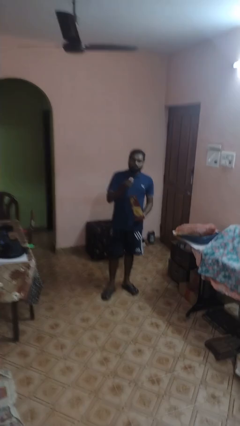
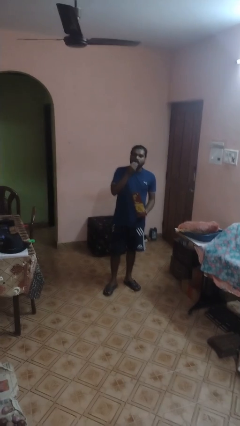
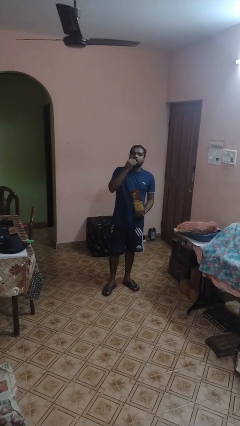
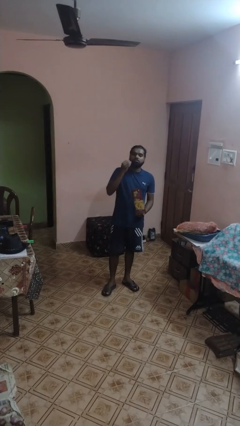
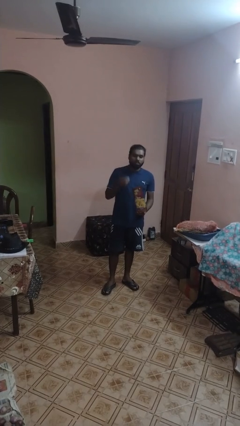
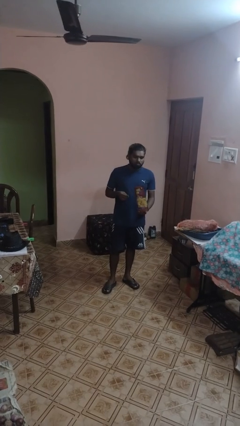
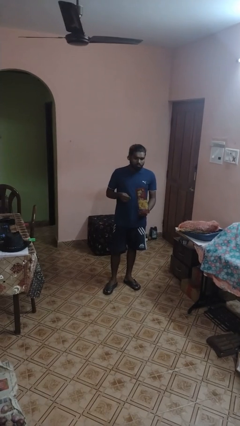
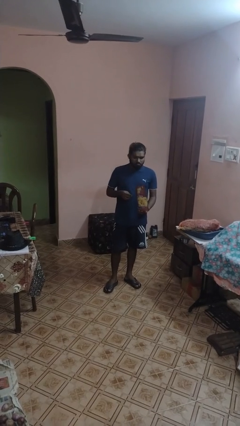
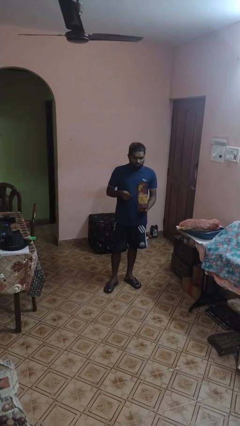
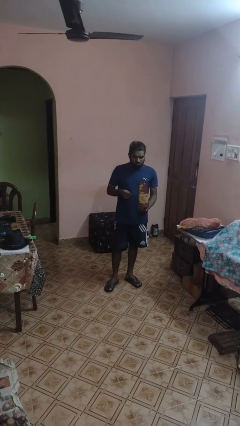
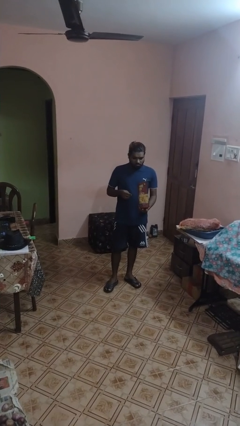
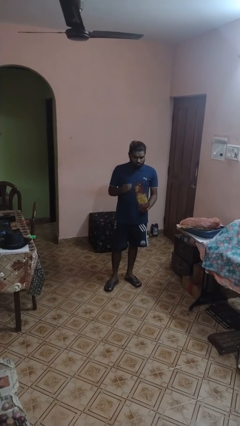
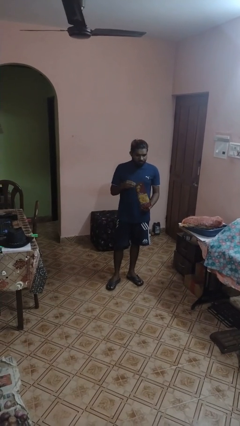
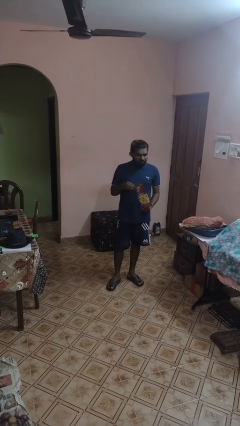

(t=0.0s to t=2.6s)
person eats snack from bag

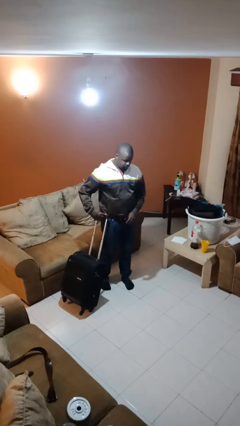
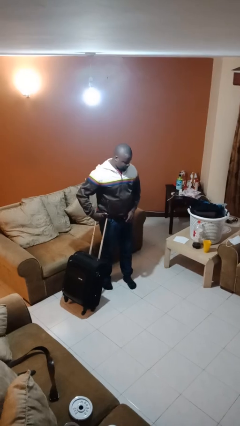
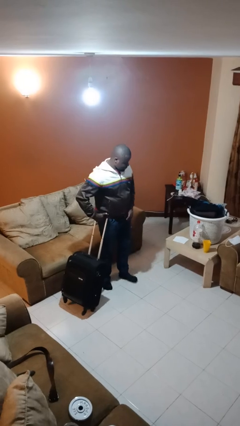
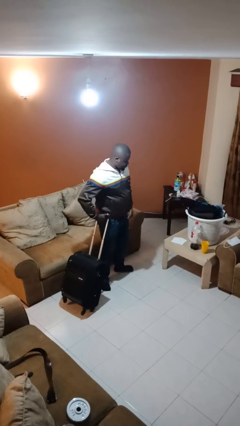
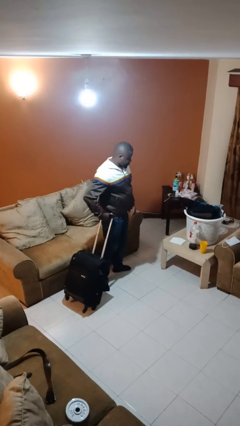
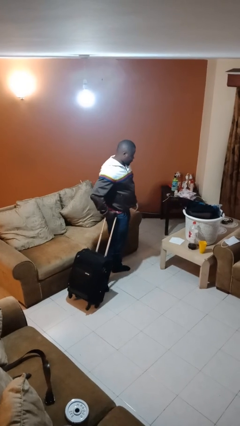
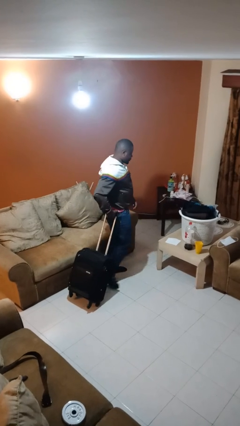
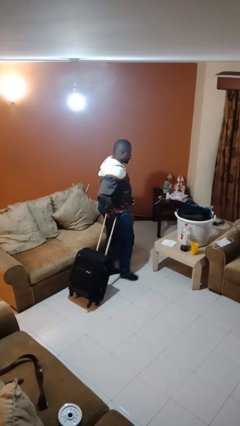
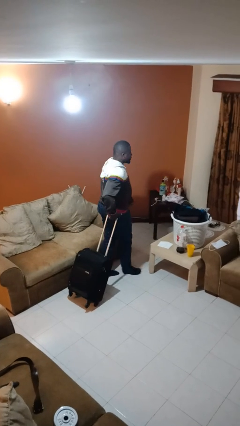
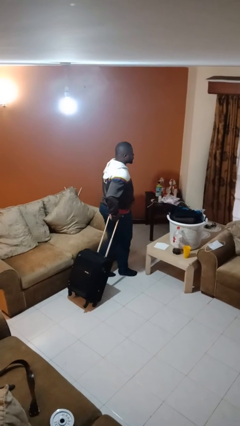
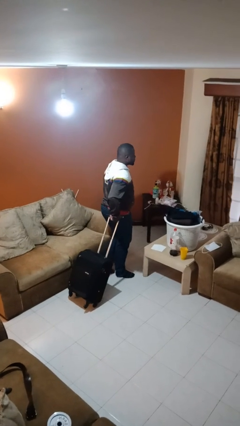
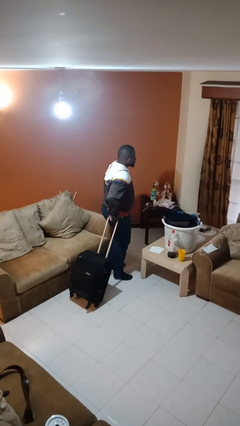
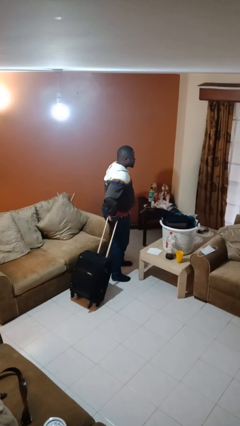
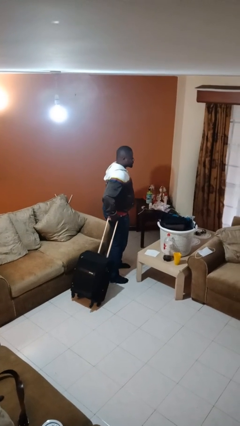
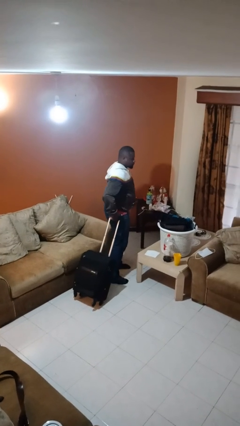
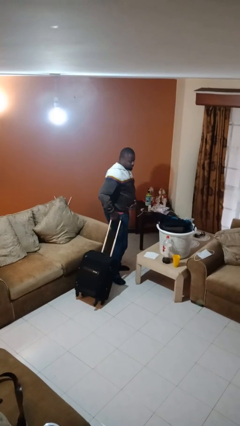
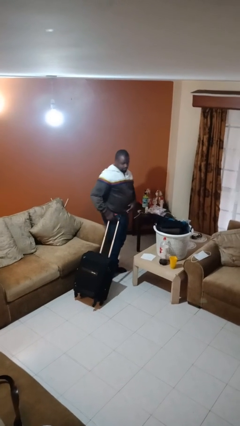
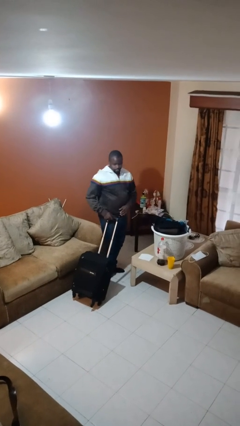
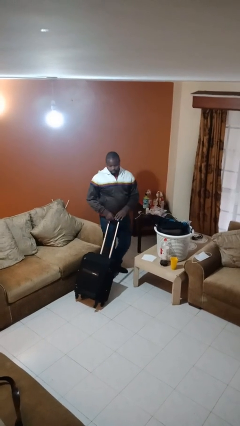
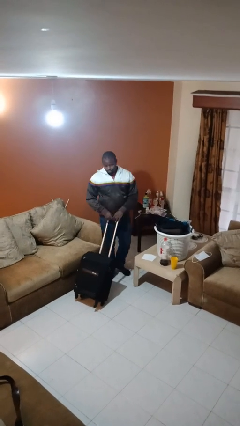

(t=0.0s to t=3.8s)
person pulls wheeled cart

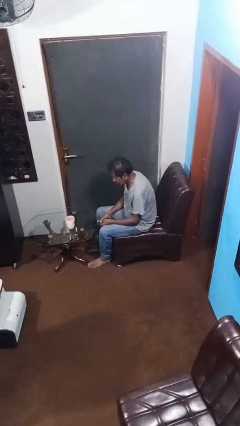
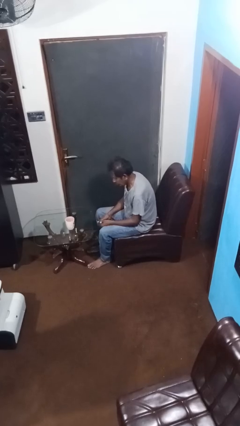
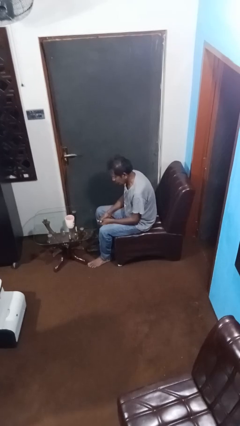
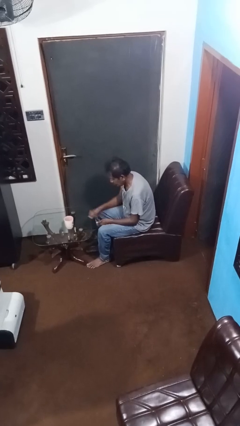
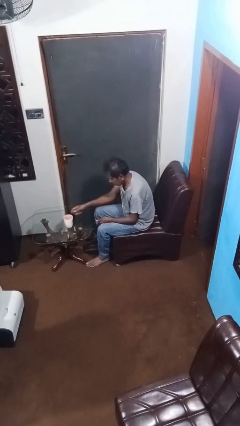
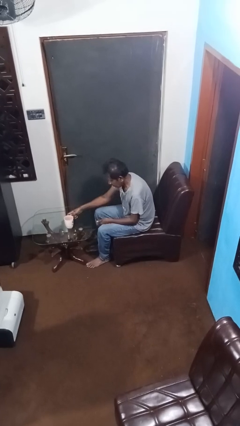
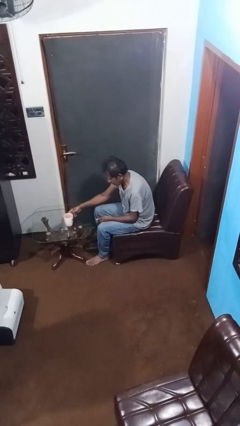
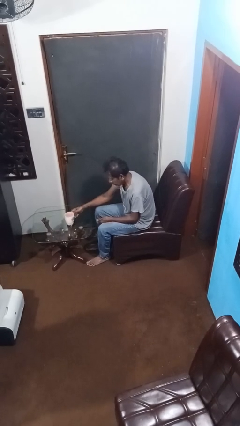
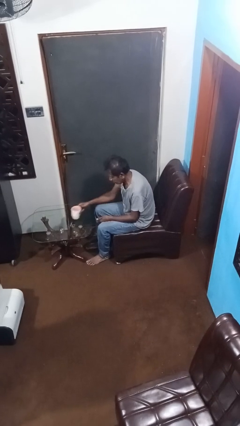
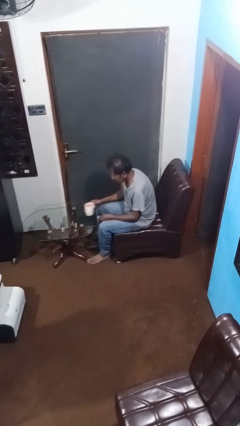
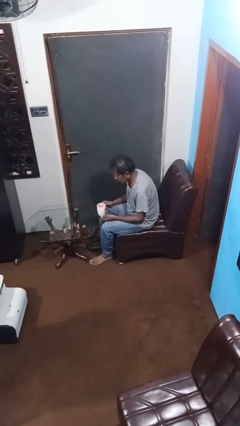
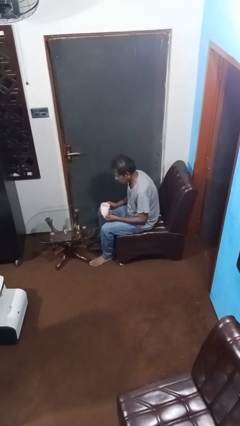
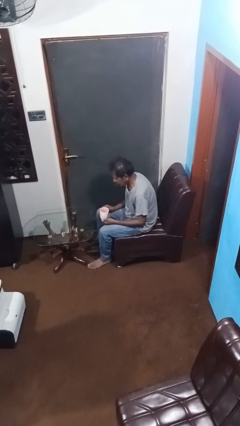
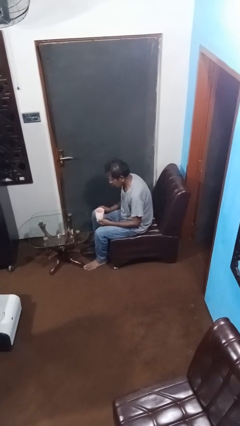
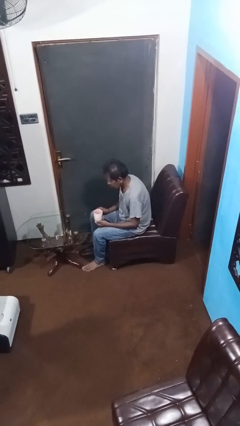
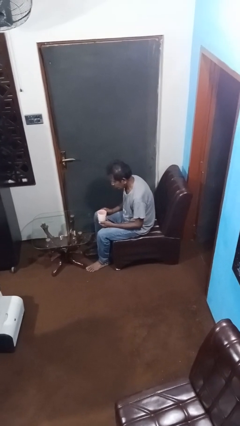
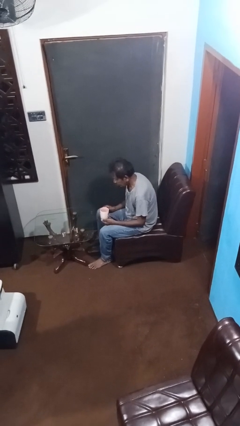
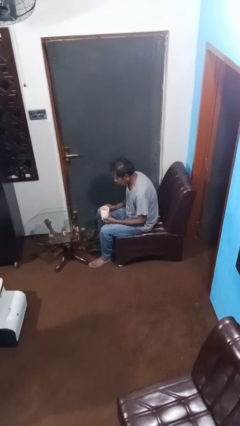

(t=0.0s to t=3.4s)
person picks up object from table

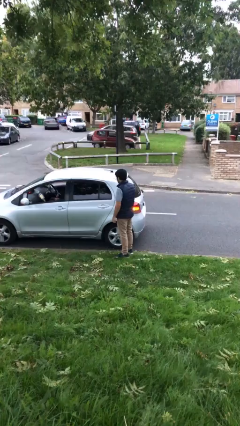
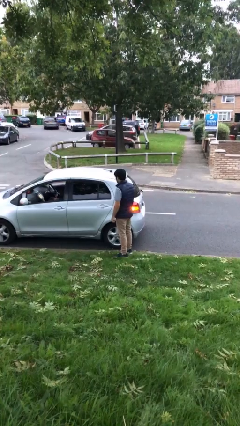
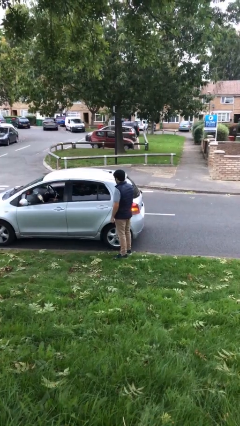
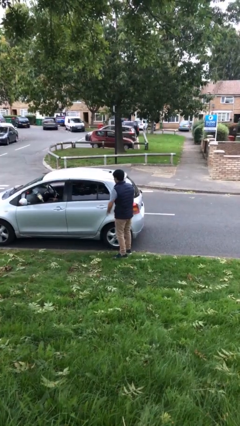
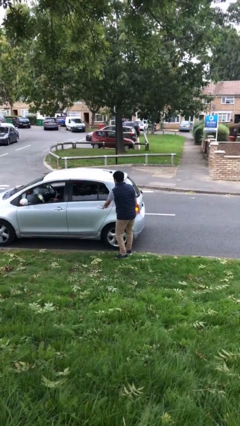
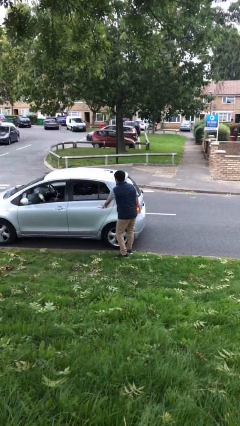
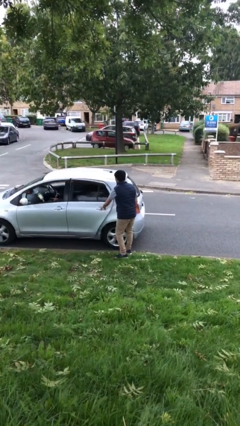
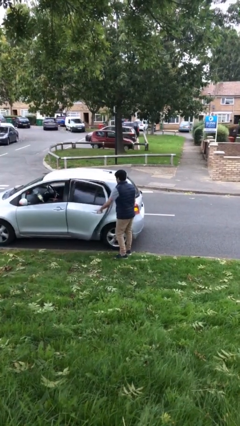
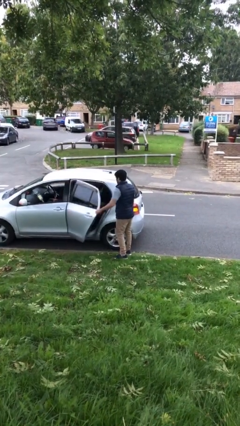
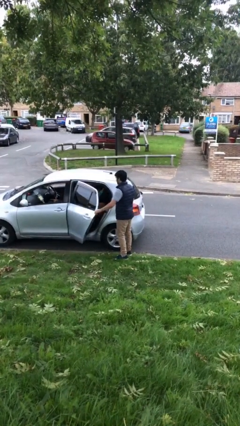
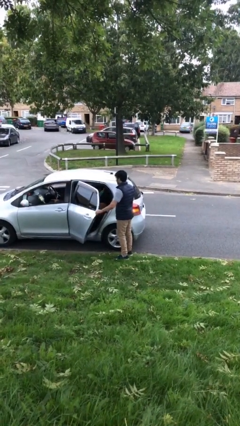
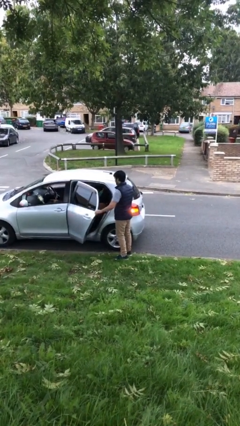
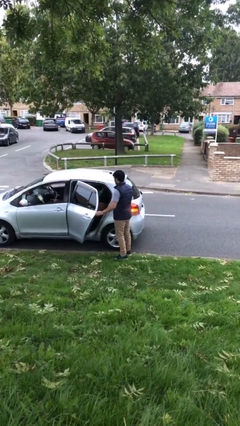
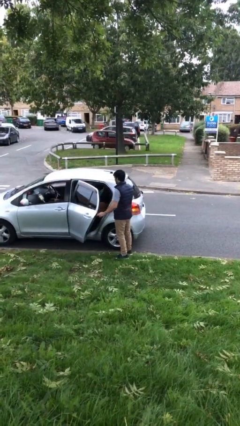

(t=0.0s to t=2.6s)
person opens car door

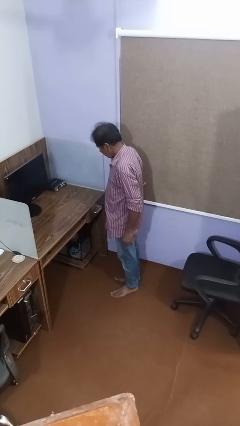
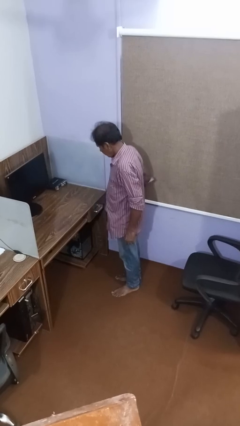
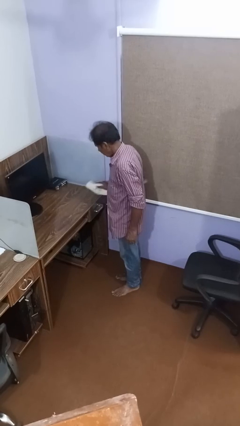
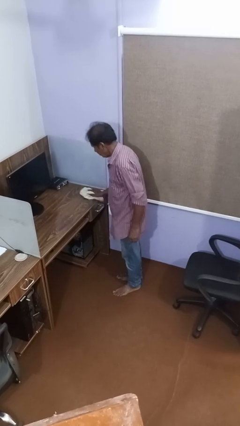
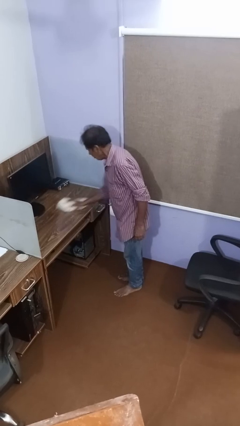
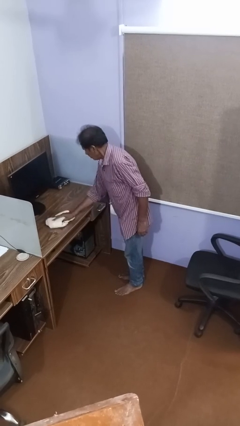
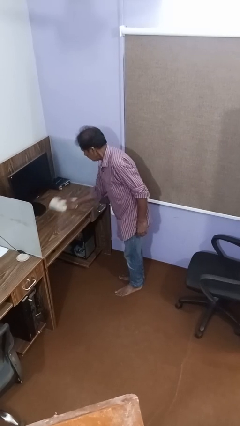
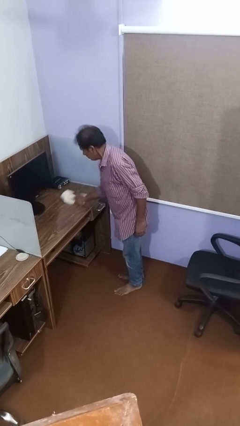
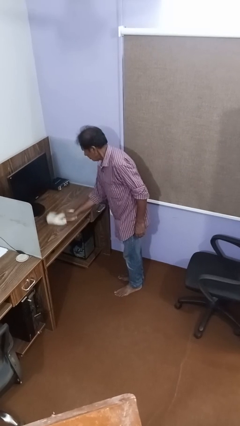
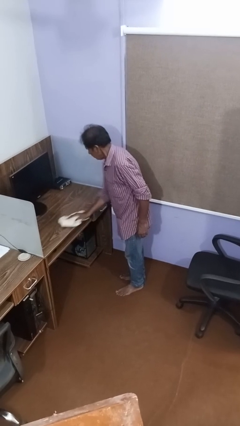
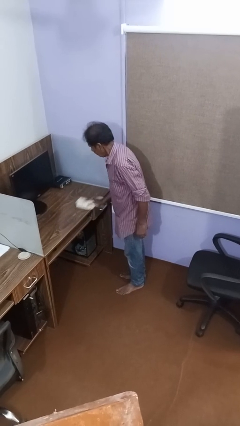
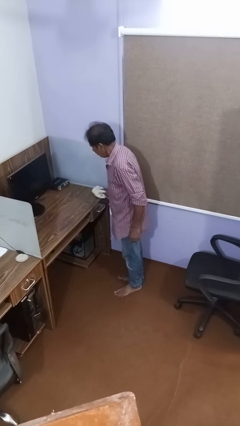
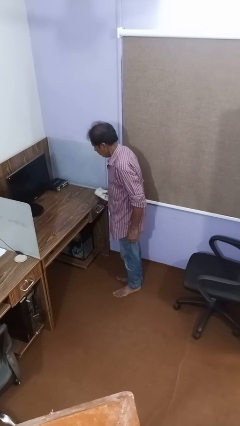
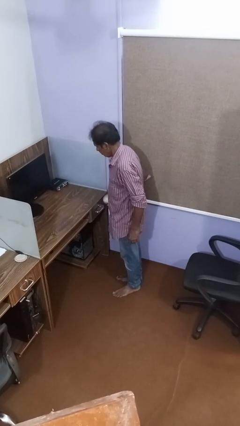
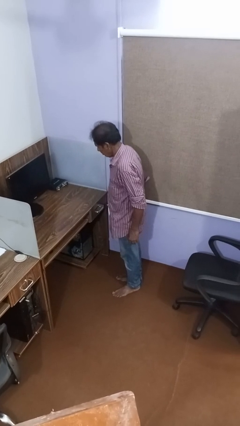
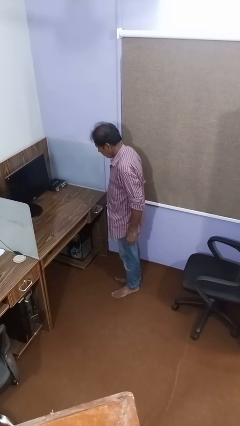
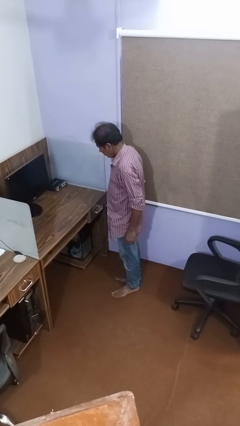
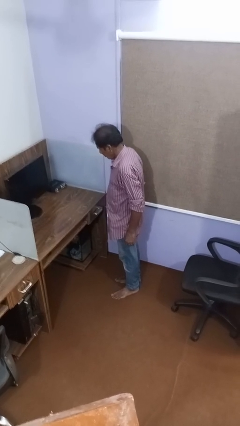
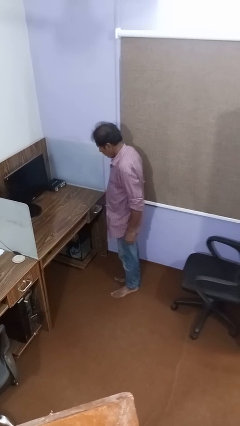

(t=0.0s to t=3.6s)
person cleans table with rag

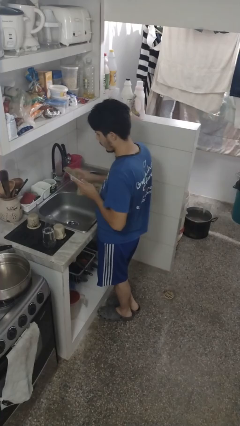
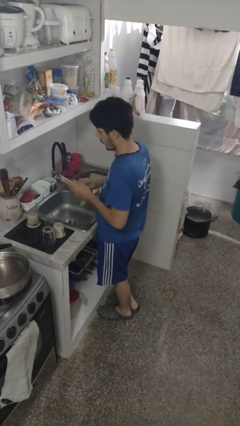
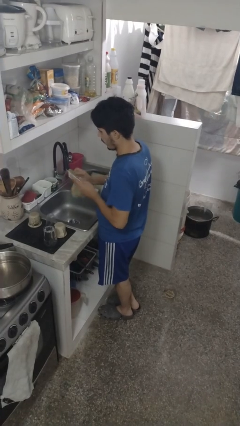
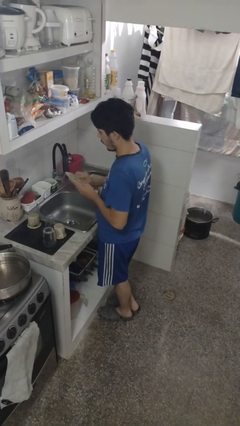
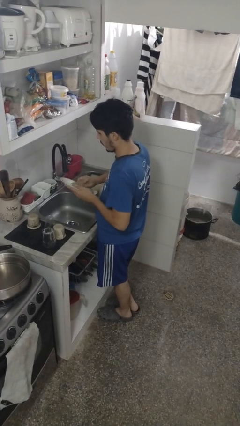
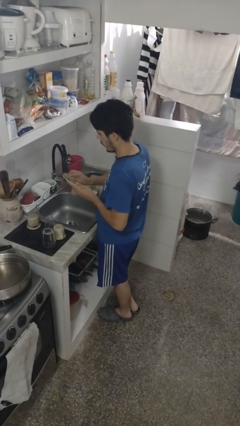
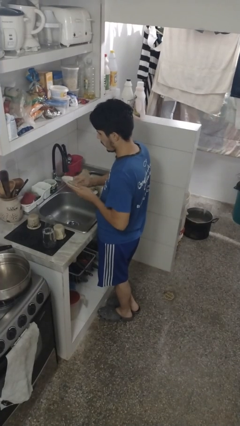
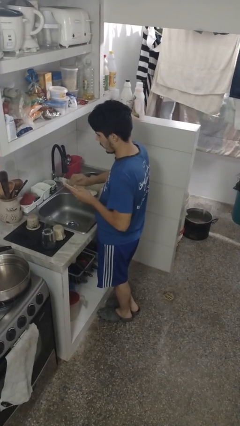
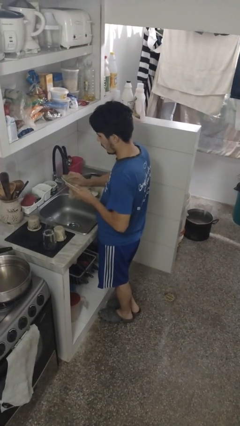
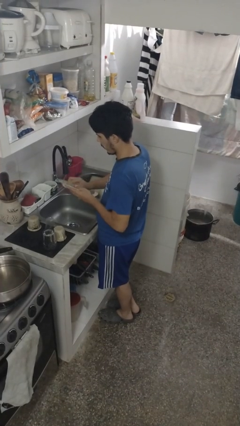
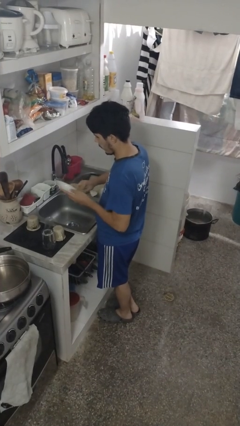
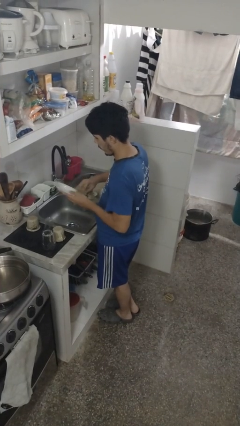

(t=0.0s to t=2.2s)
person dries dish
